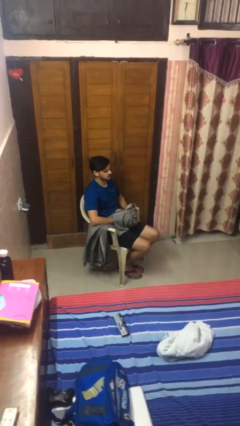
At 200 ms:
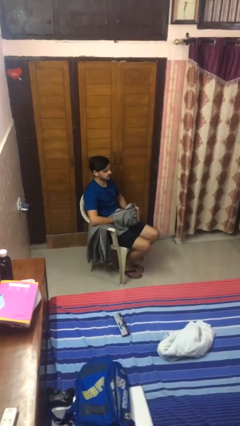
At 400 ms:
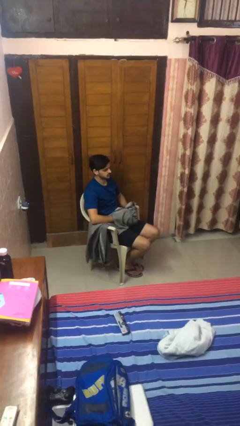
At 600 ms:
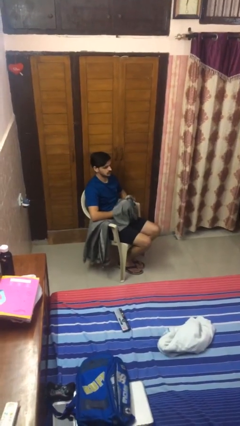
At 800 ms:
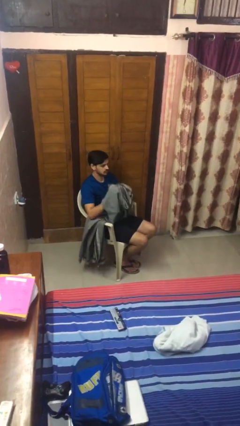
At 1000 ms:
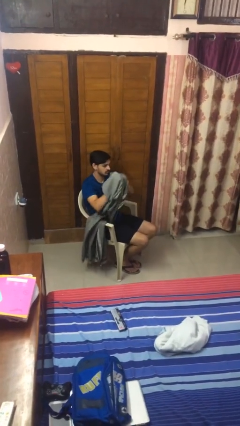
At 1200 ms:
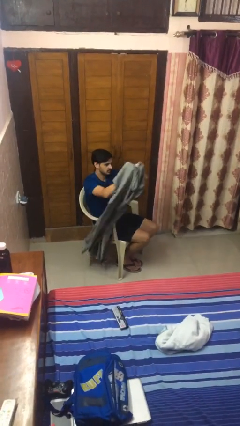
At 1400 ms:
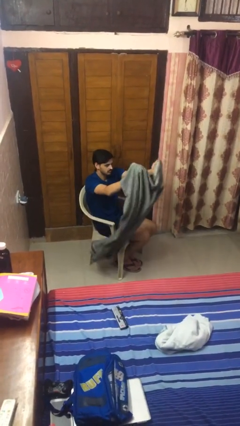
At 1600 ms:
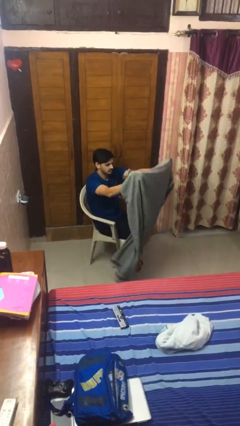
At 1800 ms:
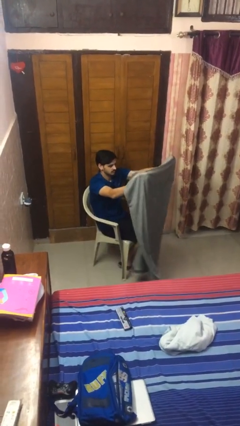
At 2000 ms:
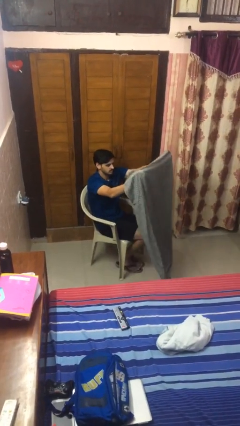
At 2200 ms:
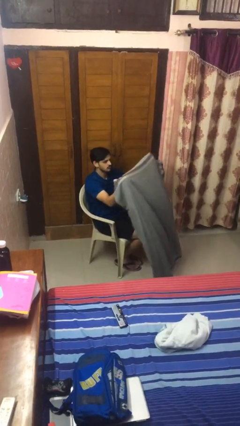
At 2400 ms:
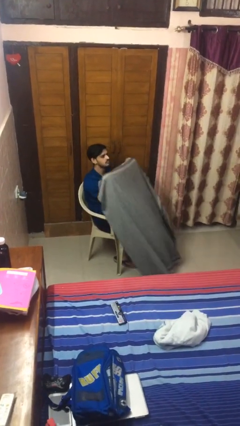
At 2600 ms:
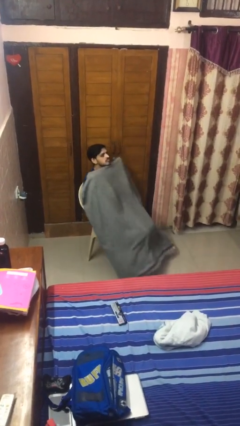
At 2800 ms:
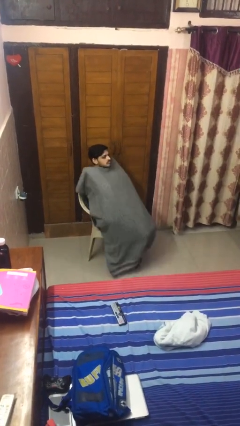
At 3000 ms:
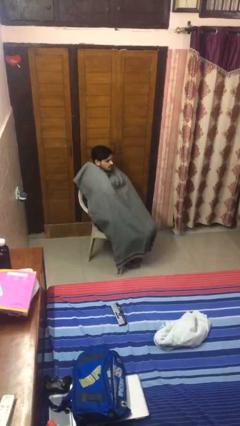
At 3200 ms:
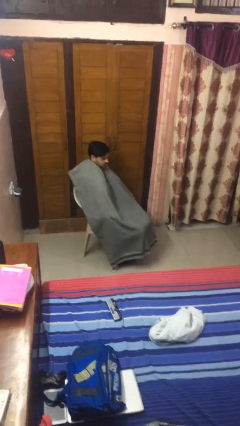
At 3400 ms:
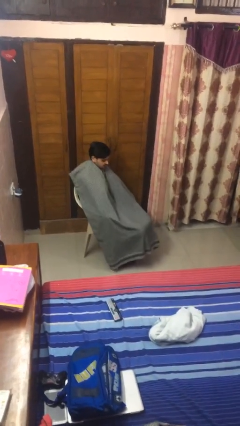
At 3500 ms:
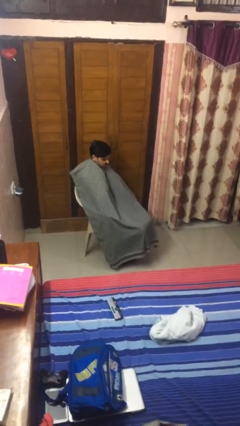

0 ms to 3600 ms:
person covers with blanket

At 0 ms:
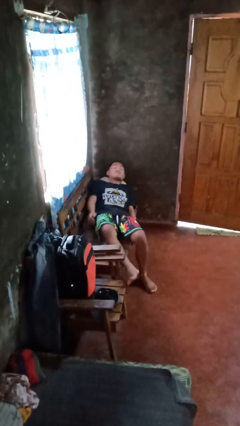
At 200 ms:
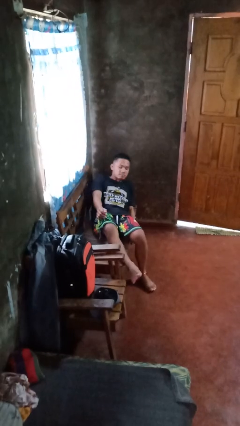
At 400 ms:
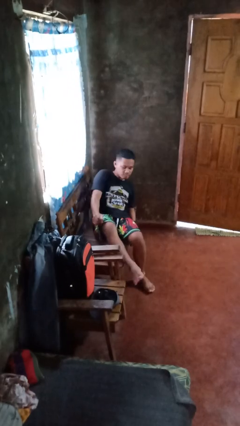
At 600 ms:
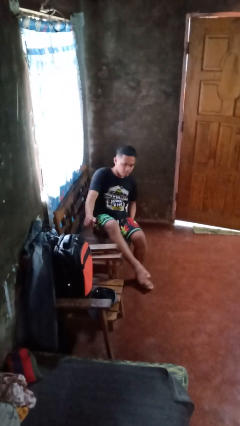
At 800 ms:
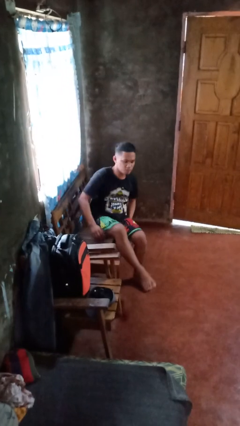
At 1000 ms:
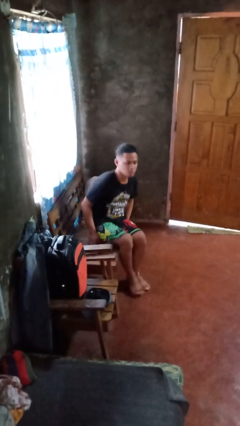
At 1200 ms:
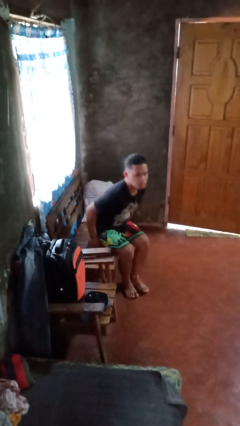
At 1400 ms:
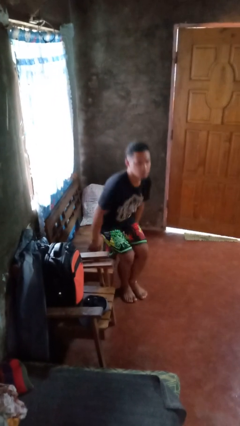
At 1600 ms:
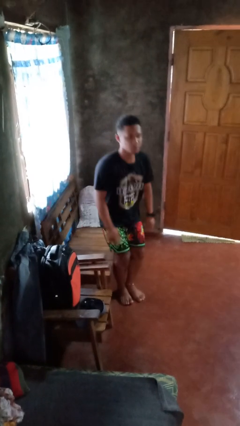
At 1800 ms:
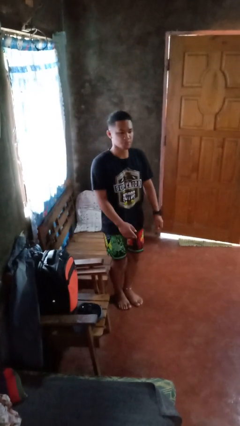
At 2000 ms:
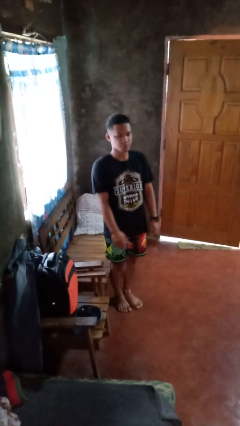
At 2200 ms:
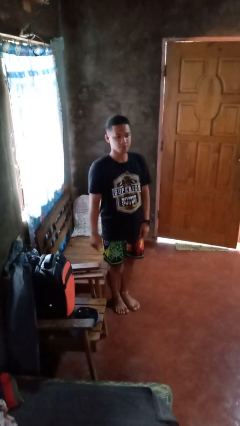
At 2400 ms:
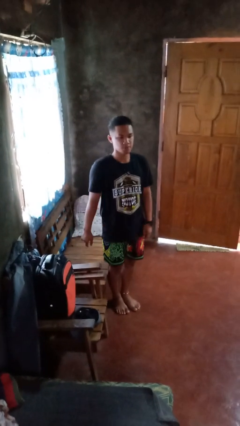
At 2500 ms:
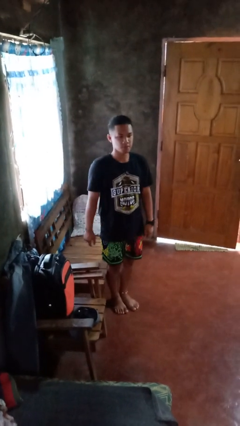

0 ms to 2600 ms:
person stands up

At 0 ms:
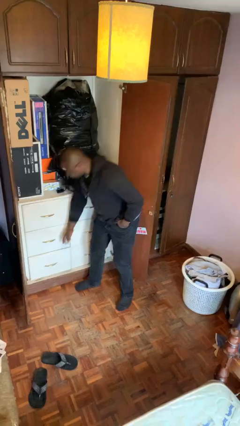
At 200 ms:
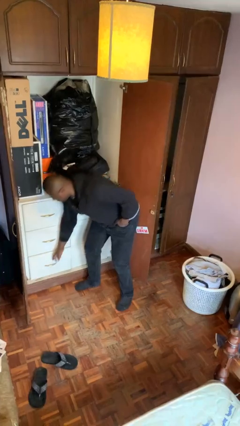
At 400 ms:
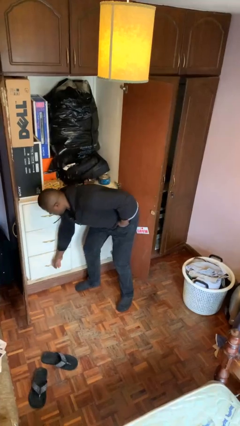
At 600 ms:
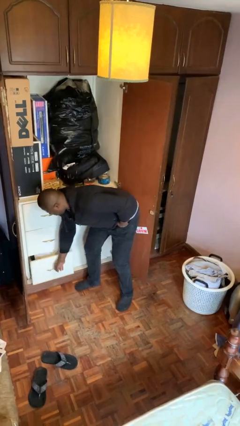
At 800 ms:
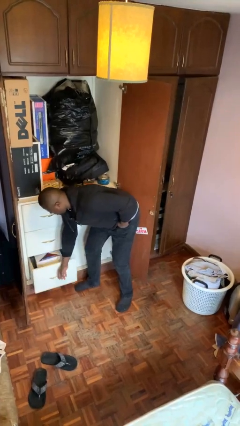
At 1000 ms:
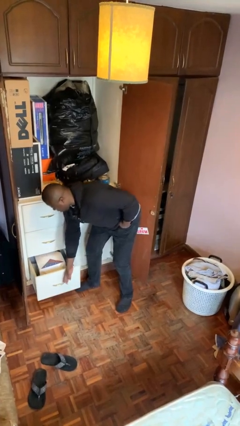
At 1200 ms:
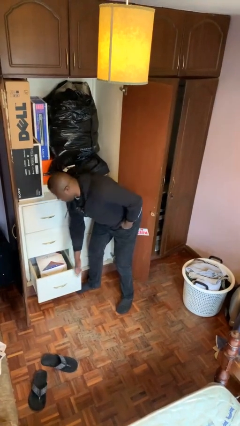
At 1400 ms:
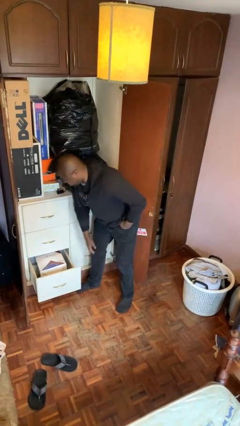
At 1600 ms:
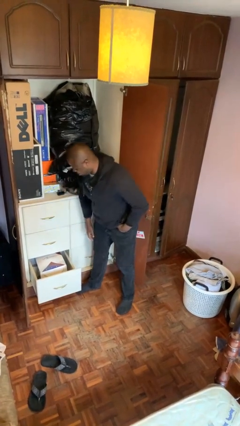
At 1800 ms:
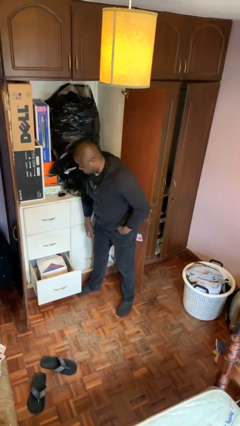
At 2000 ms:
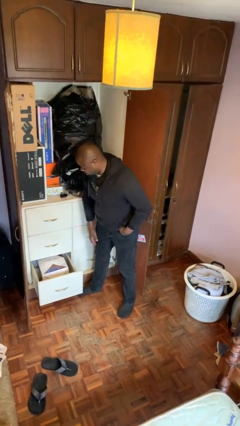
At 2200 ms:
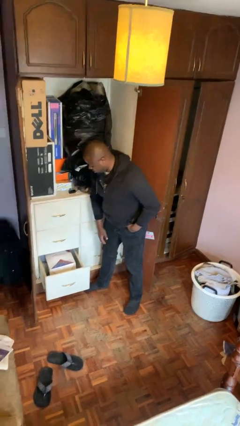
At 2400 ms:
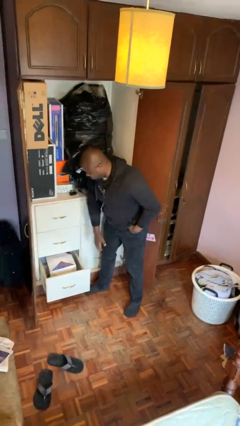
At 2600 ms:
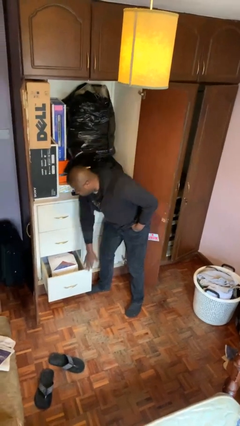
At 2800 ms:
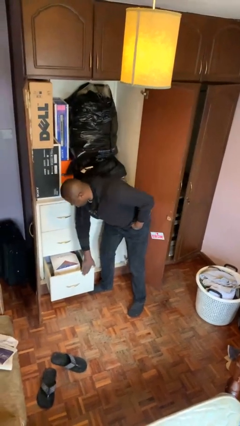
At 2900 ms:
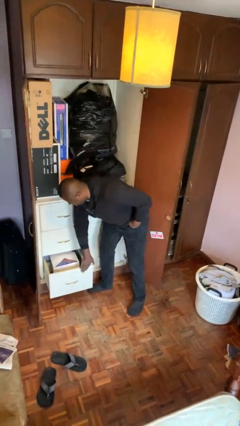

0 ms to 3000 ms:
person opens dresser drawer

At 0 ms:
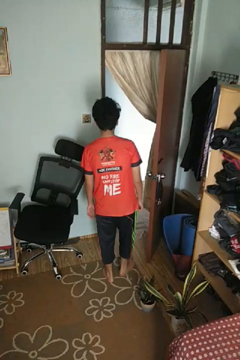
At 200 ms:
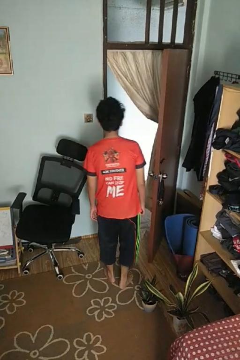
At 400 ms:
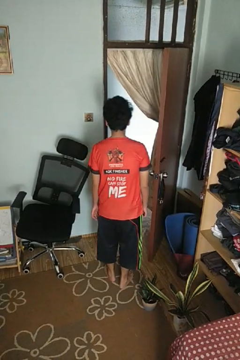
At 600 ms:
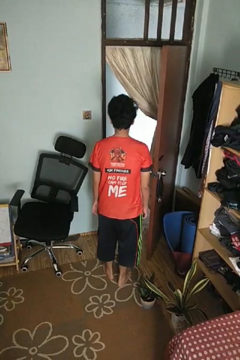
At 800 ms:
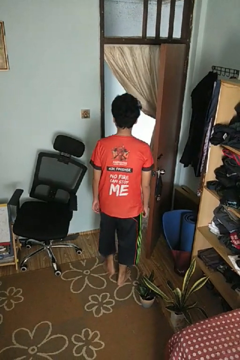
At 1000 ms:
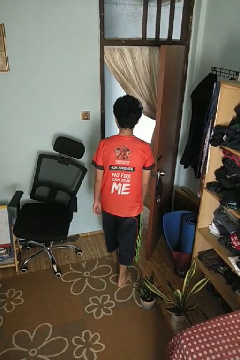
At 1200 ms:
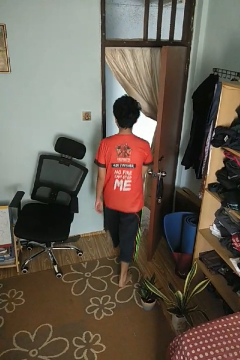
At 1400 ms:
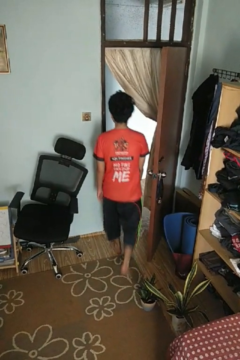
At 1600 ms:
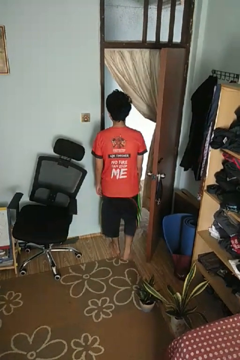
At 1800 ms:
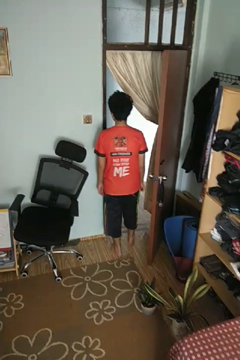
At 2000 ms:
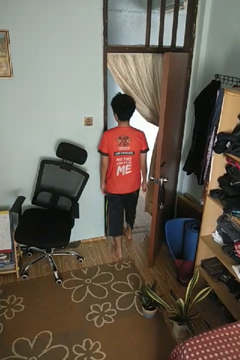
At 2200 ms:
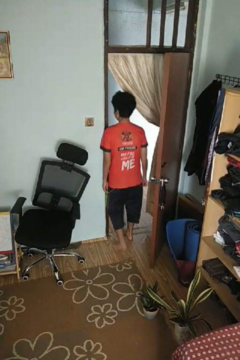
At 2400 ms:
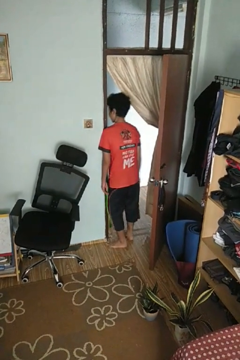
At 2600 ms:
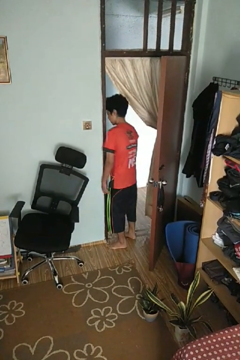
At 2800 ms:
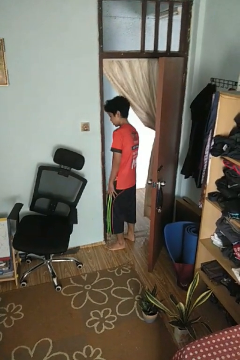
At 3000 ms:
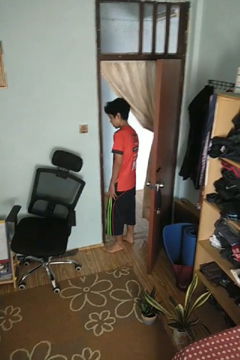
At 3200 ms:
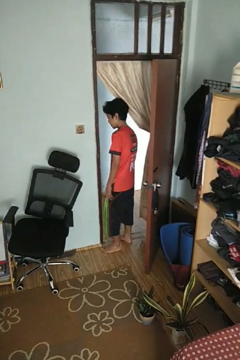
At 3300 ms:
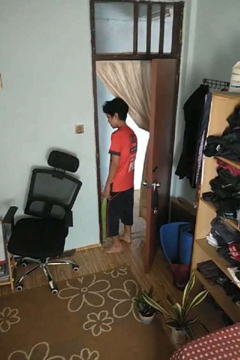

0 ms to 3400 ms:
person bumps into wall

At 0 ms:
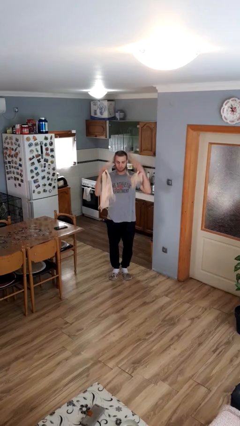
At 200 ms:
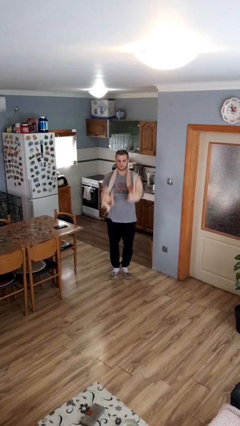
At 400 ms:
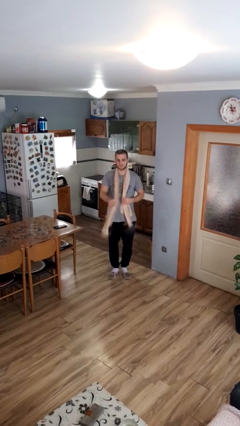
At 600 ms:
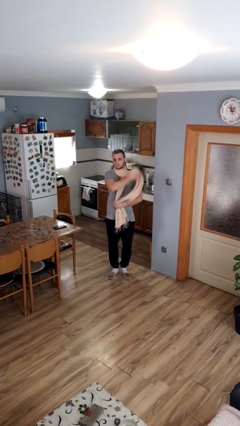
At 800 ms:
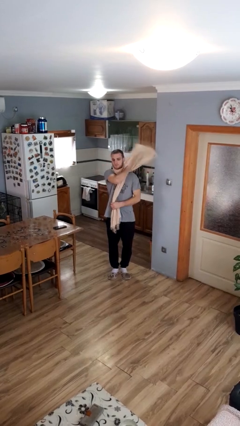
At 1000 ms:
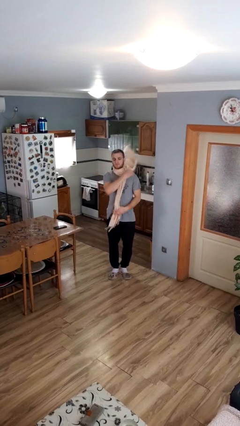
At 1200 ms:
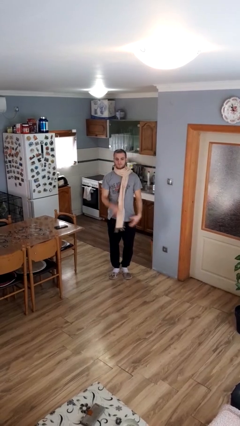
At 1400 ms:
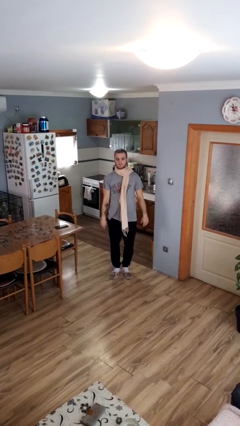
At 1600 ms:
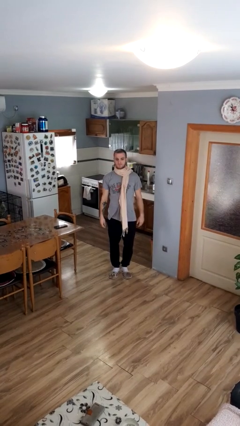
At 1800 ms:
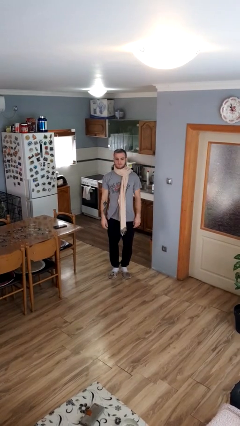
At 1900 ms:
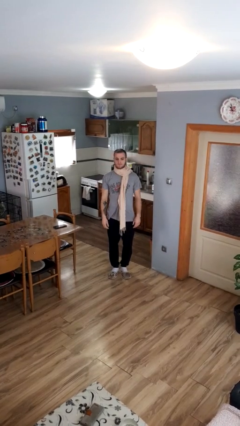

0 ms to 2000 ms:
person puts on scarf

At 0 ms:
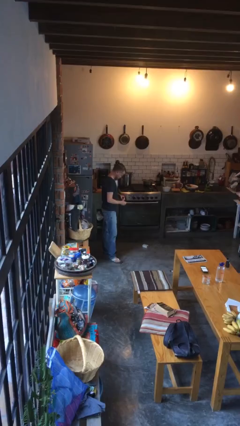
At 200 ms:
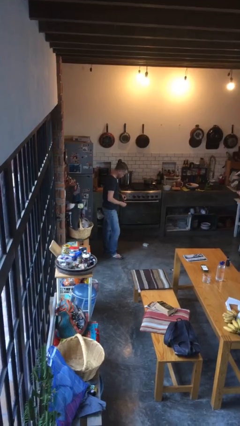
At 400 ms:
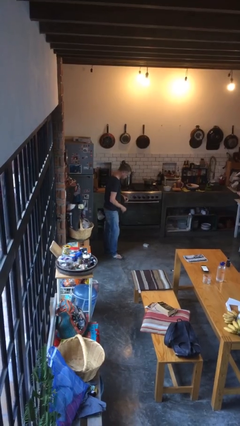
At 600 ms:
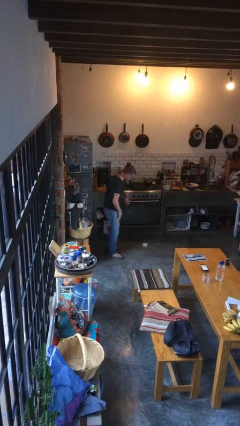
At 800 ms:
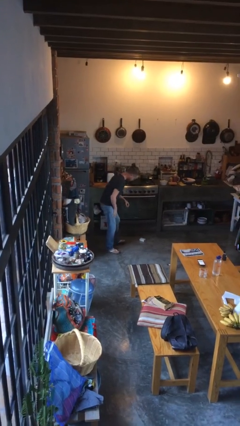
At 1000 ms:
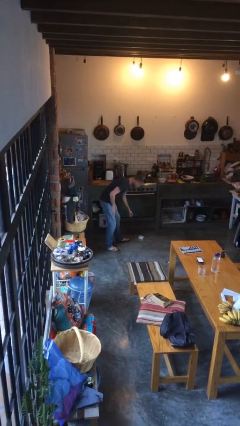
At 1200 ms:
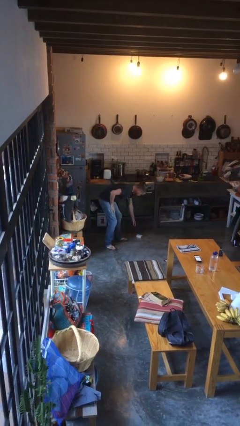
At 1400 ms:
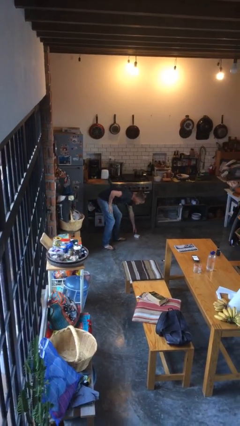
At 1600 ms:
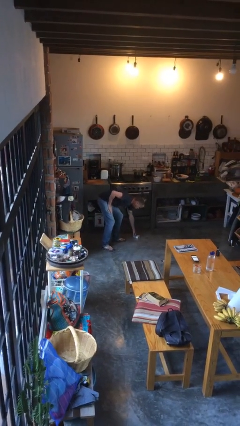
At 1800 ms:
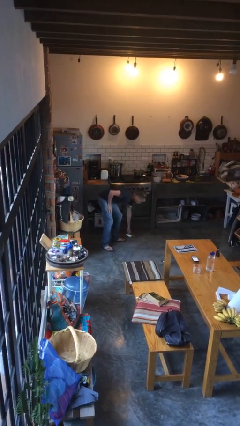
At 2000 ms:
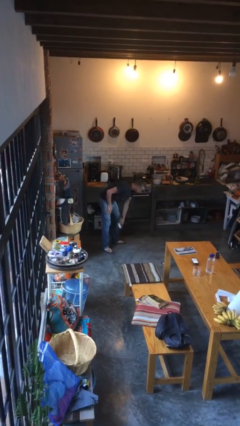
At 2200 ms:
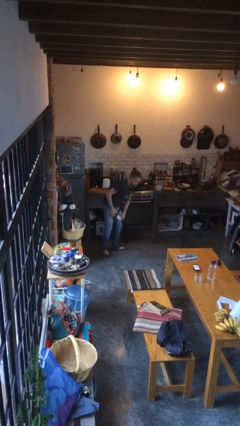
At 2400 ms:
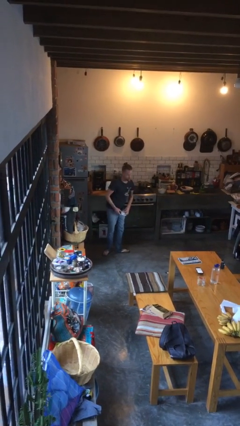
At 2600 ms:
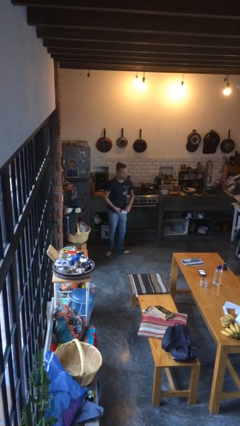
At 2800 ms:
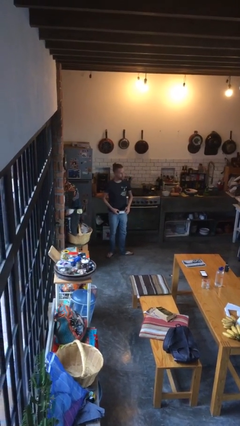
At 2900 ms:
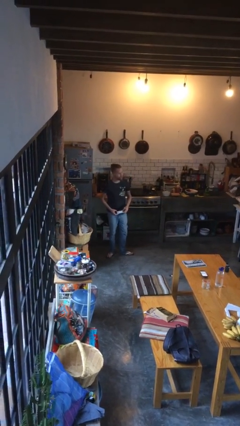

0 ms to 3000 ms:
person picks up object from floor

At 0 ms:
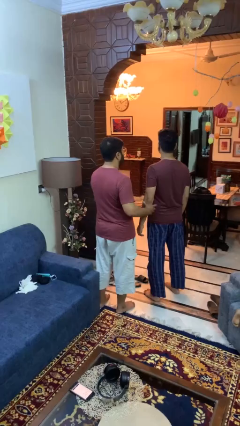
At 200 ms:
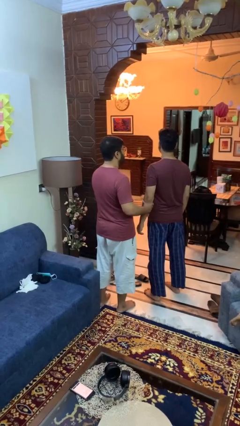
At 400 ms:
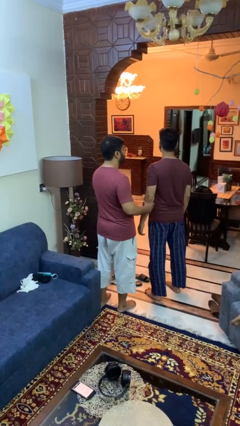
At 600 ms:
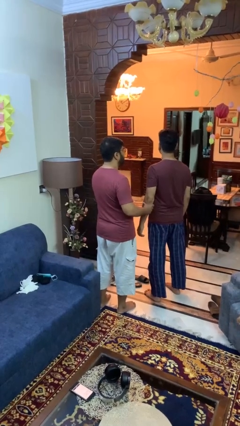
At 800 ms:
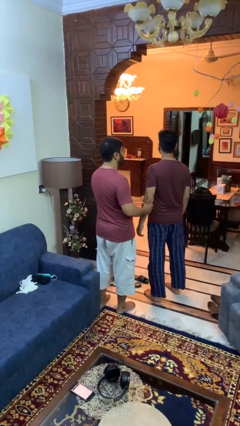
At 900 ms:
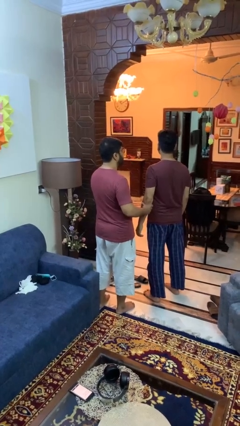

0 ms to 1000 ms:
person grabs person by forearm
